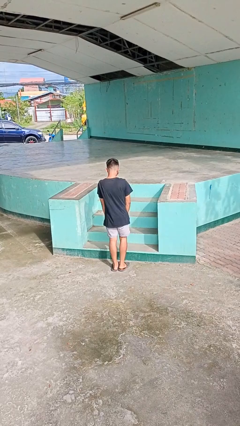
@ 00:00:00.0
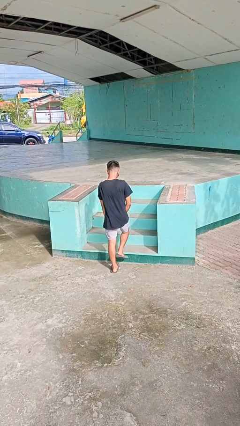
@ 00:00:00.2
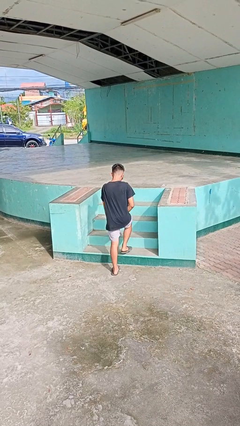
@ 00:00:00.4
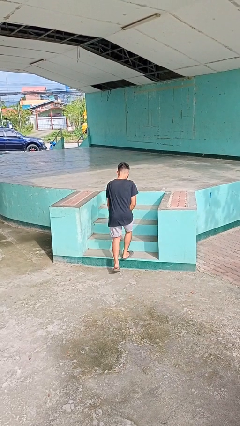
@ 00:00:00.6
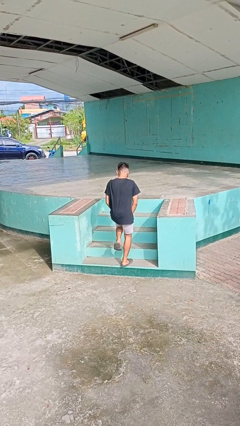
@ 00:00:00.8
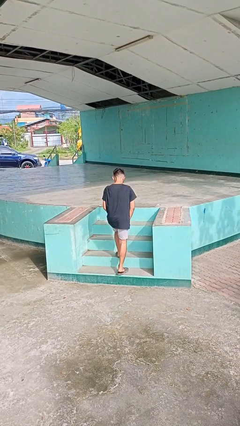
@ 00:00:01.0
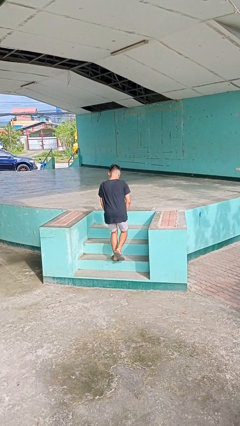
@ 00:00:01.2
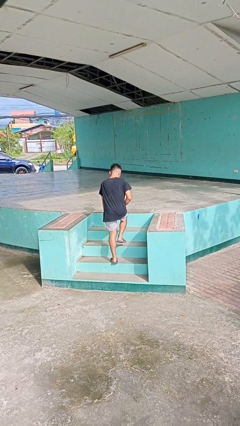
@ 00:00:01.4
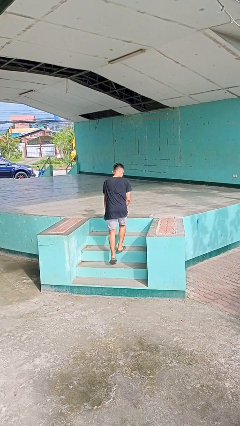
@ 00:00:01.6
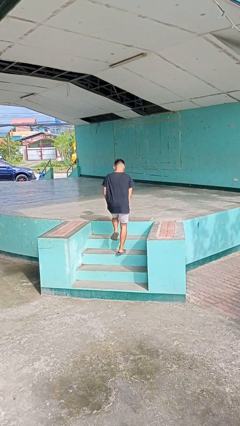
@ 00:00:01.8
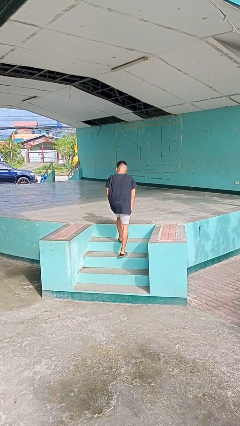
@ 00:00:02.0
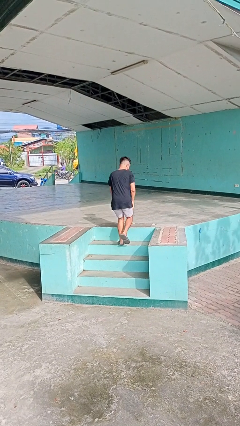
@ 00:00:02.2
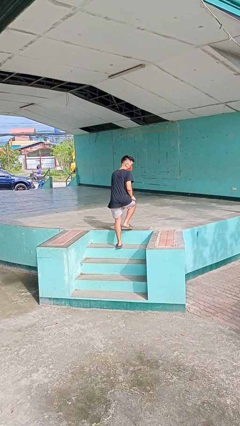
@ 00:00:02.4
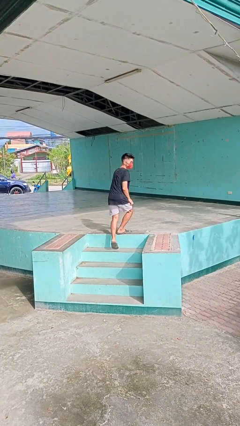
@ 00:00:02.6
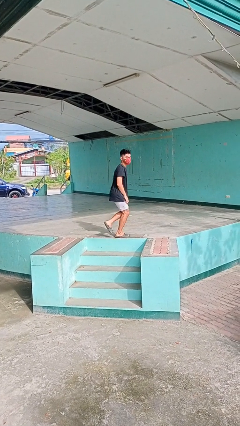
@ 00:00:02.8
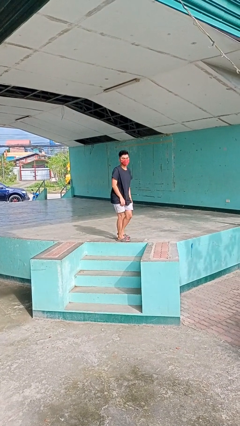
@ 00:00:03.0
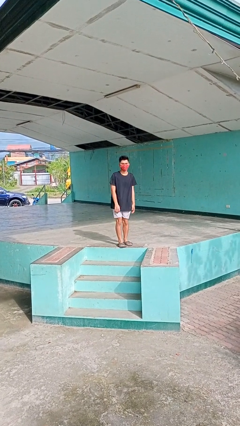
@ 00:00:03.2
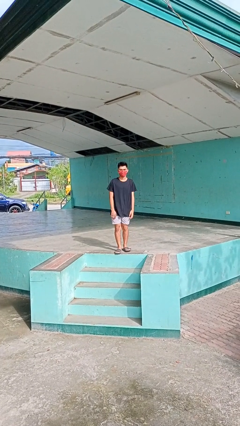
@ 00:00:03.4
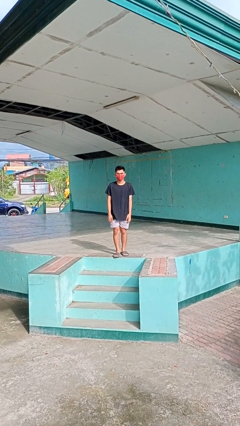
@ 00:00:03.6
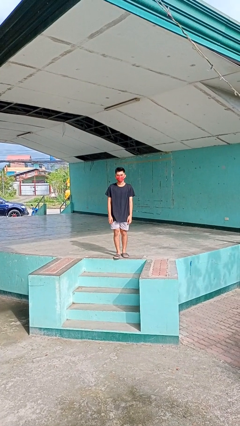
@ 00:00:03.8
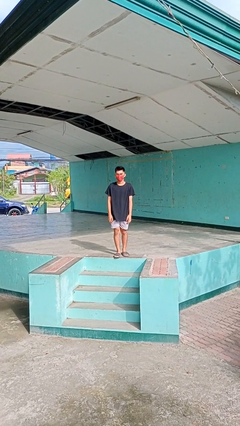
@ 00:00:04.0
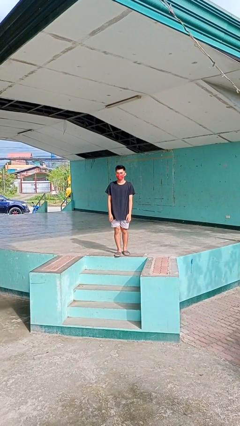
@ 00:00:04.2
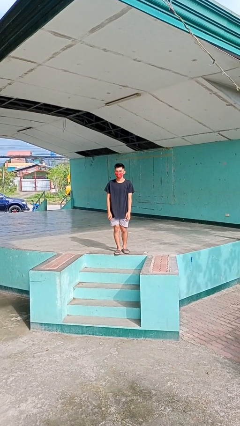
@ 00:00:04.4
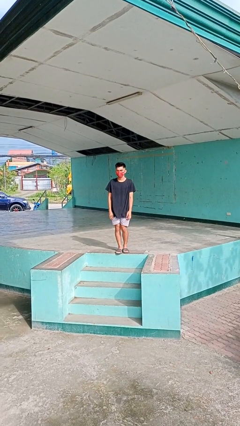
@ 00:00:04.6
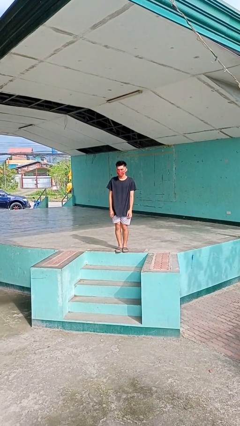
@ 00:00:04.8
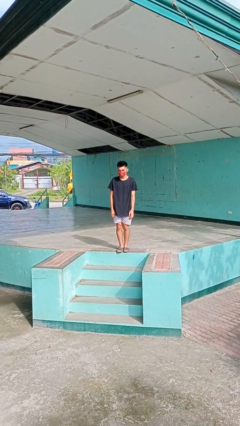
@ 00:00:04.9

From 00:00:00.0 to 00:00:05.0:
person climbs up stairs

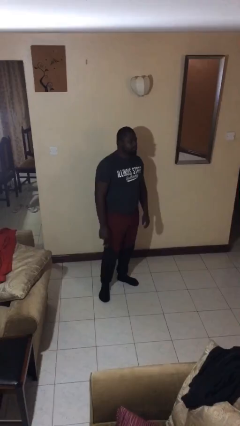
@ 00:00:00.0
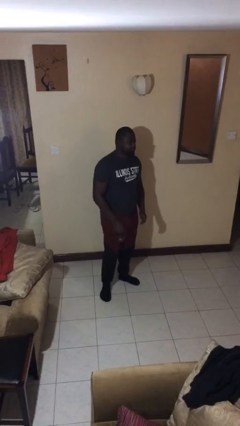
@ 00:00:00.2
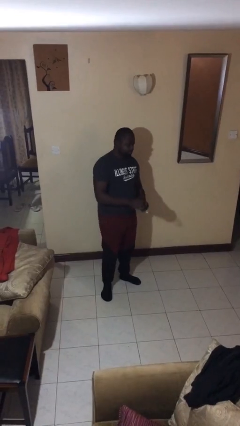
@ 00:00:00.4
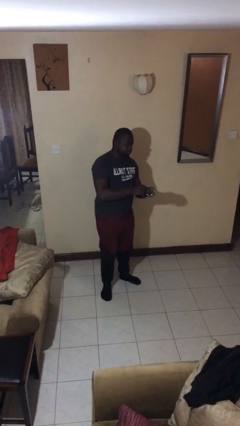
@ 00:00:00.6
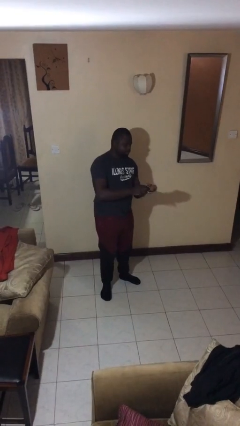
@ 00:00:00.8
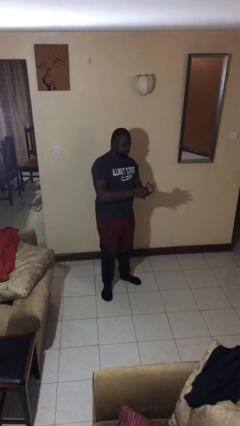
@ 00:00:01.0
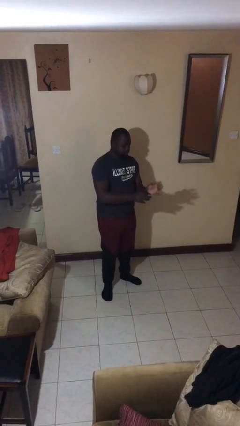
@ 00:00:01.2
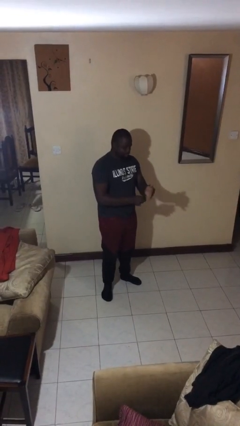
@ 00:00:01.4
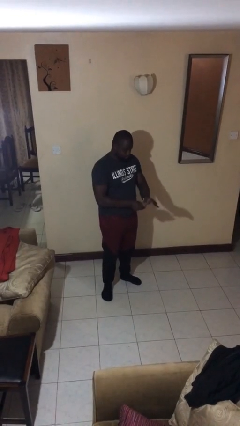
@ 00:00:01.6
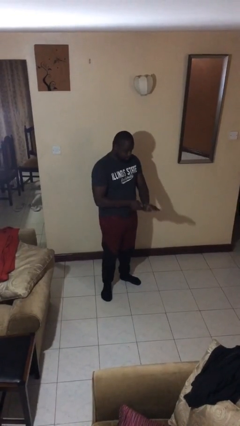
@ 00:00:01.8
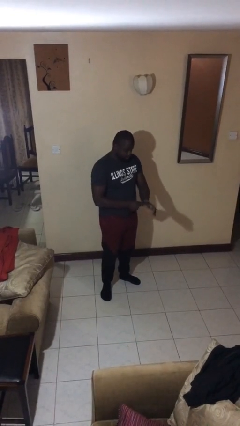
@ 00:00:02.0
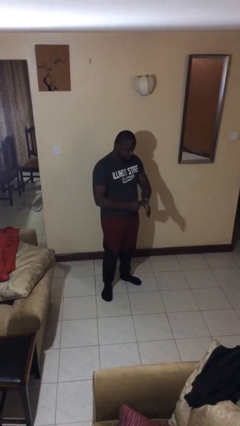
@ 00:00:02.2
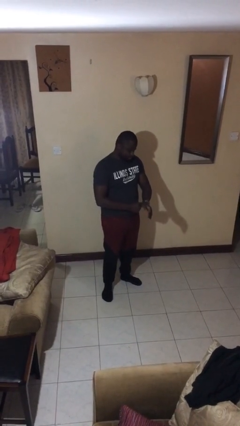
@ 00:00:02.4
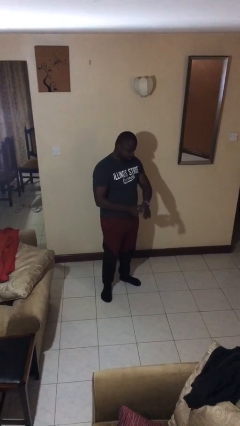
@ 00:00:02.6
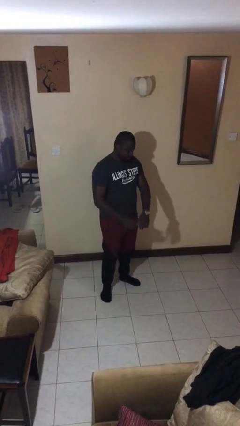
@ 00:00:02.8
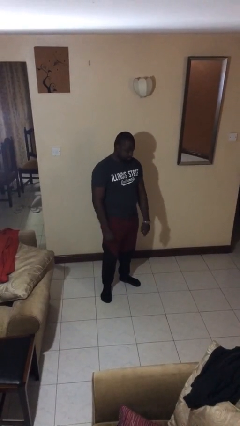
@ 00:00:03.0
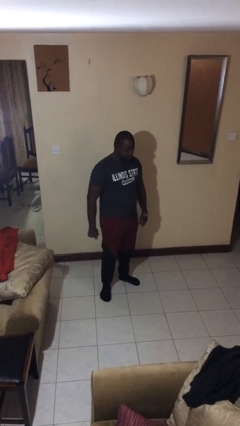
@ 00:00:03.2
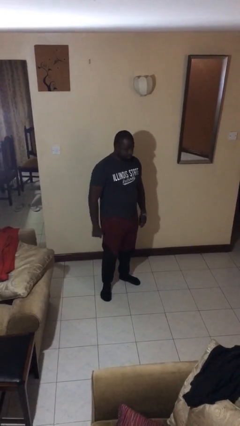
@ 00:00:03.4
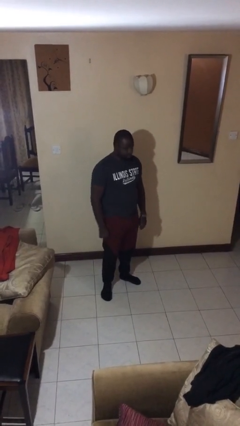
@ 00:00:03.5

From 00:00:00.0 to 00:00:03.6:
person puts on wristwatch

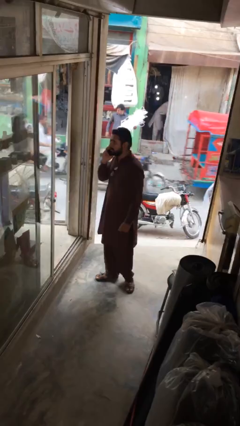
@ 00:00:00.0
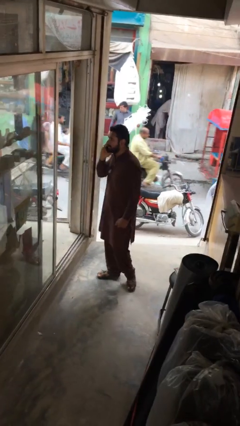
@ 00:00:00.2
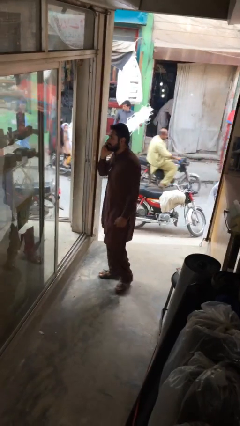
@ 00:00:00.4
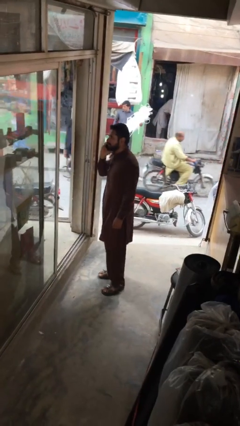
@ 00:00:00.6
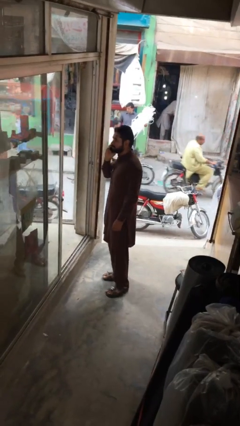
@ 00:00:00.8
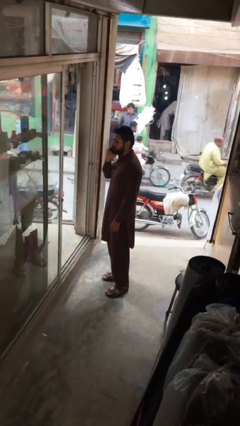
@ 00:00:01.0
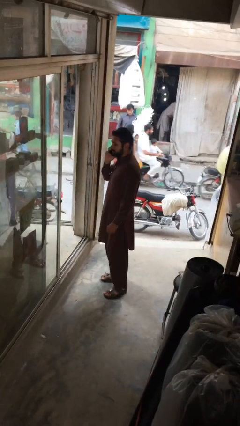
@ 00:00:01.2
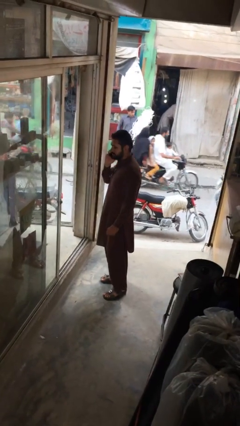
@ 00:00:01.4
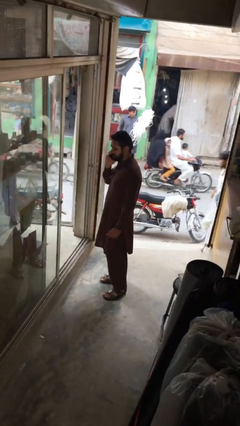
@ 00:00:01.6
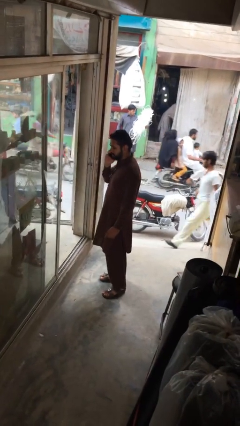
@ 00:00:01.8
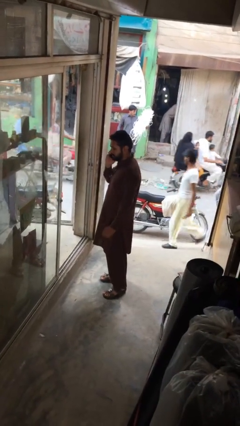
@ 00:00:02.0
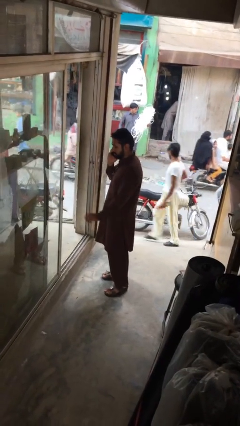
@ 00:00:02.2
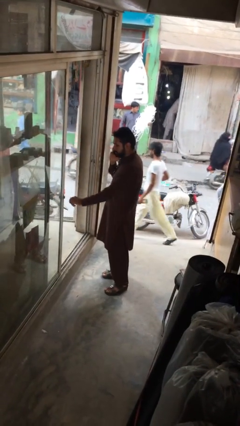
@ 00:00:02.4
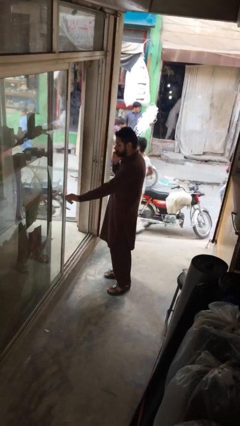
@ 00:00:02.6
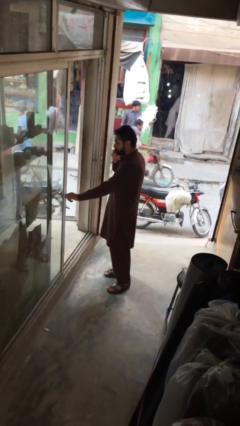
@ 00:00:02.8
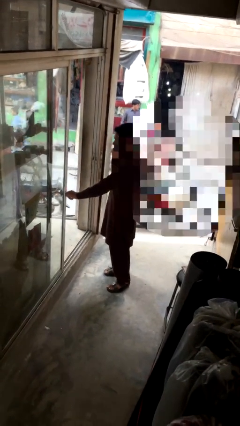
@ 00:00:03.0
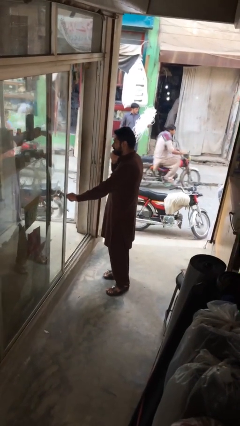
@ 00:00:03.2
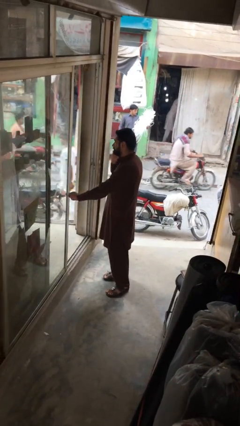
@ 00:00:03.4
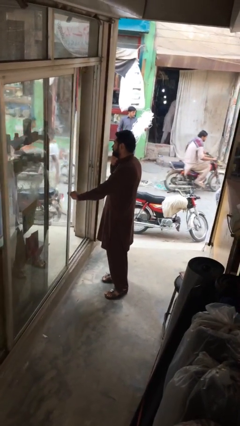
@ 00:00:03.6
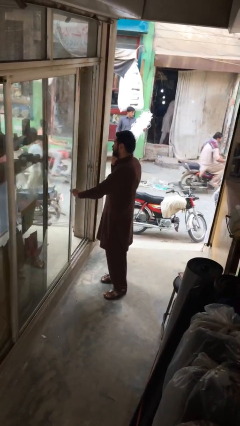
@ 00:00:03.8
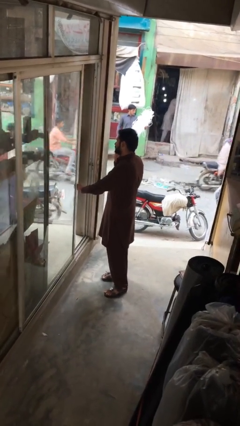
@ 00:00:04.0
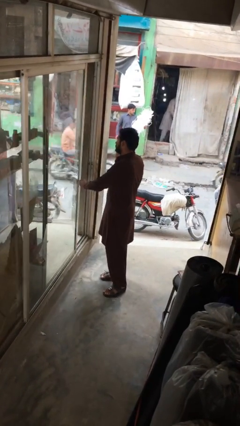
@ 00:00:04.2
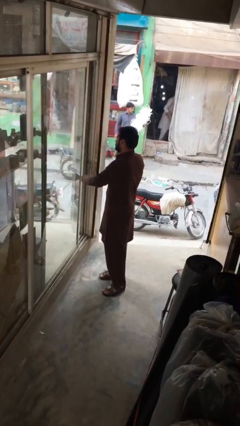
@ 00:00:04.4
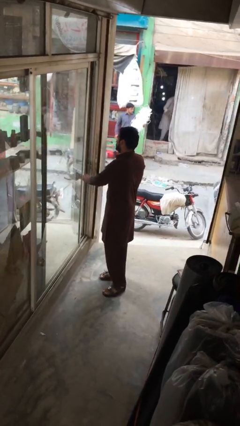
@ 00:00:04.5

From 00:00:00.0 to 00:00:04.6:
person closes facility door

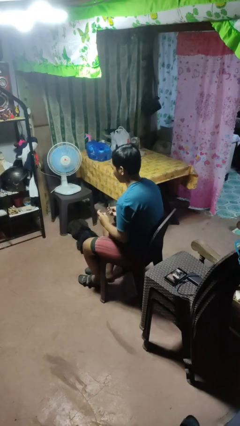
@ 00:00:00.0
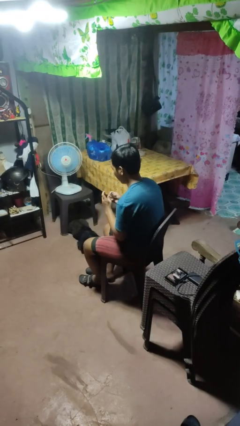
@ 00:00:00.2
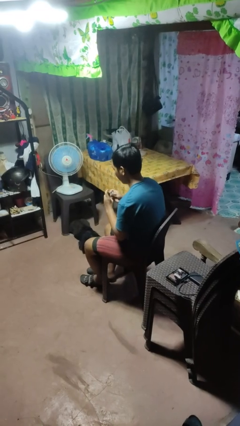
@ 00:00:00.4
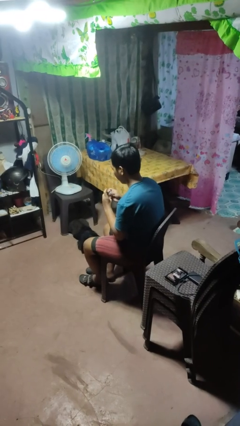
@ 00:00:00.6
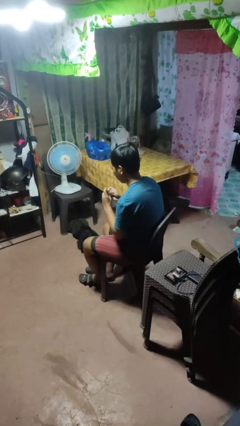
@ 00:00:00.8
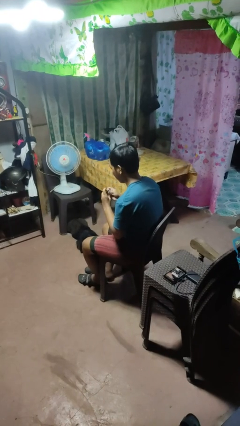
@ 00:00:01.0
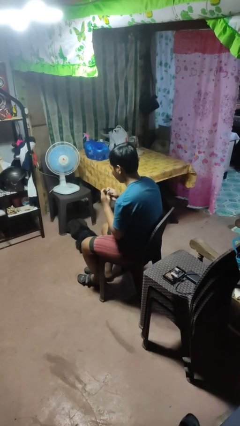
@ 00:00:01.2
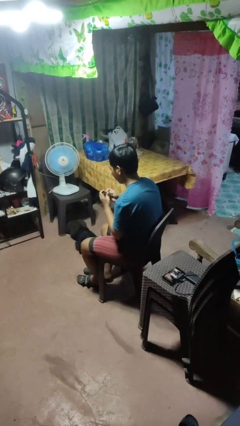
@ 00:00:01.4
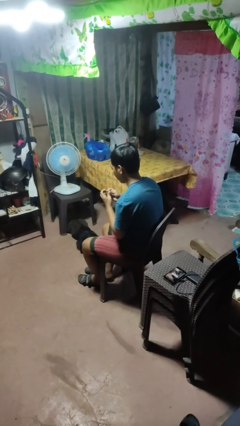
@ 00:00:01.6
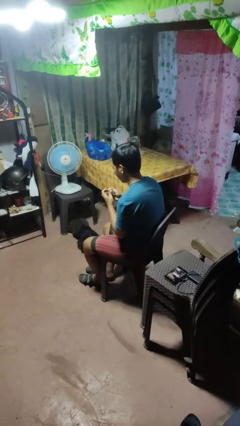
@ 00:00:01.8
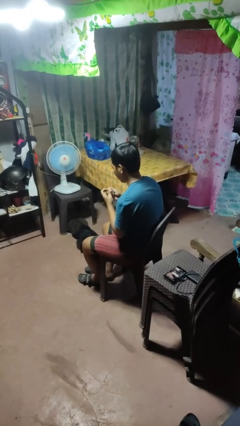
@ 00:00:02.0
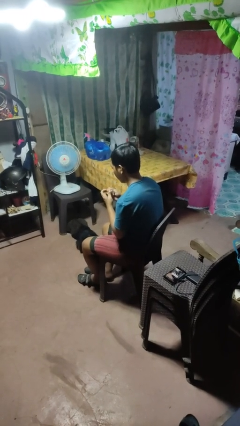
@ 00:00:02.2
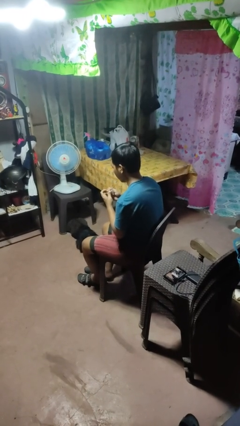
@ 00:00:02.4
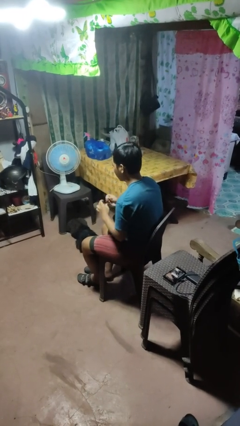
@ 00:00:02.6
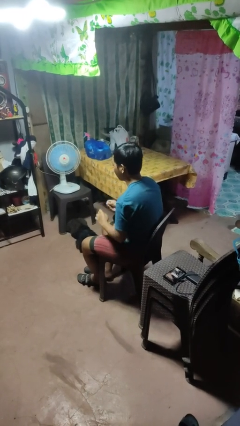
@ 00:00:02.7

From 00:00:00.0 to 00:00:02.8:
person files fingernails

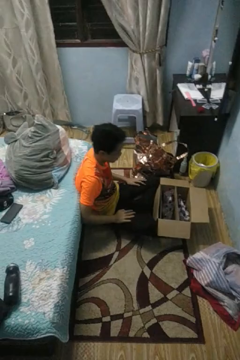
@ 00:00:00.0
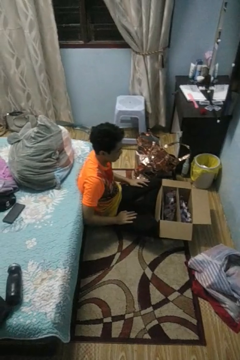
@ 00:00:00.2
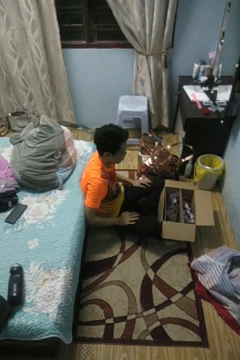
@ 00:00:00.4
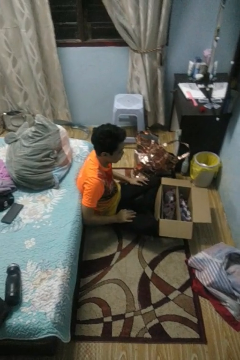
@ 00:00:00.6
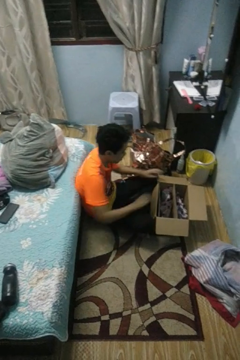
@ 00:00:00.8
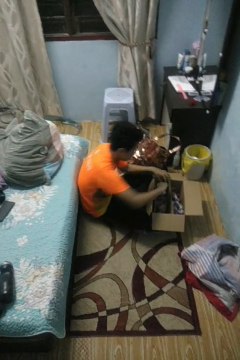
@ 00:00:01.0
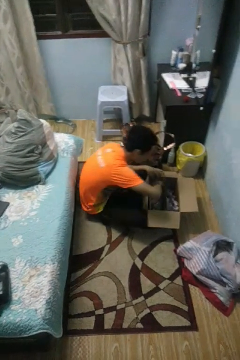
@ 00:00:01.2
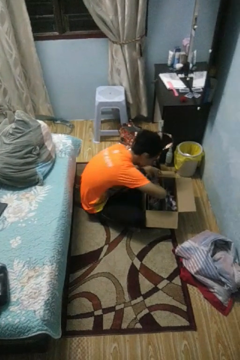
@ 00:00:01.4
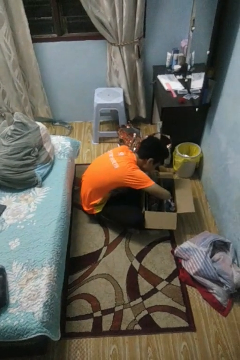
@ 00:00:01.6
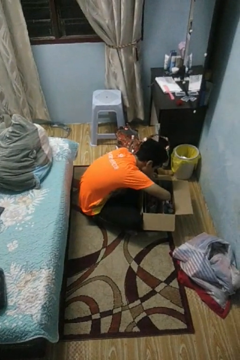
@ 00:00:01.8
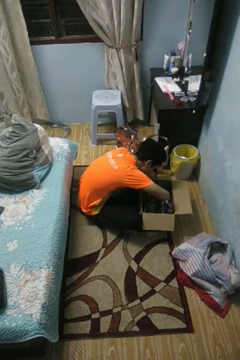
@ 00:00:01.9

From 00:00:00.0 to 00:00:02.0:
person searches in box
